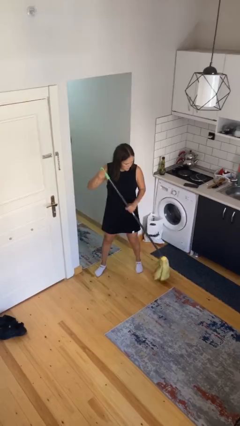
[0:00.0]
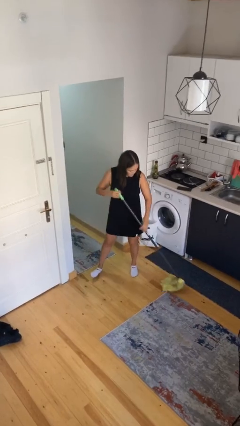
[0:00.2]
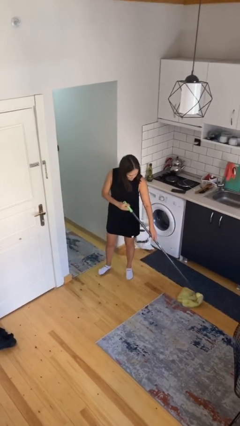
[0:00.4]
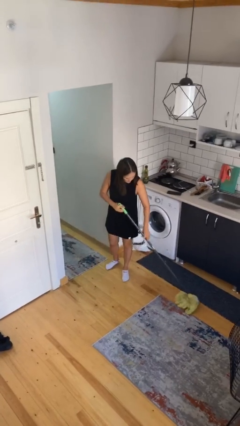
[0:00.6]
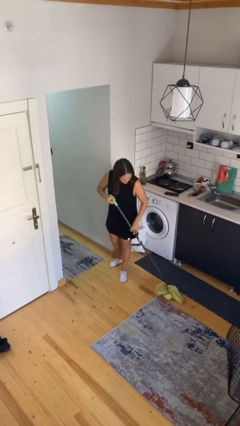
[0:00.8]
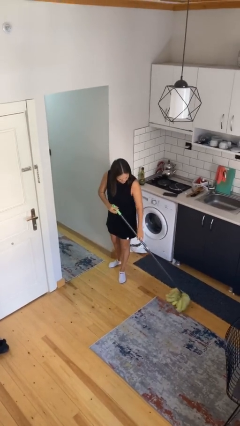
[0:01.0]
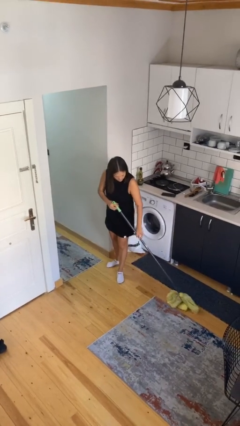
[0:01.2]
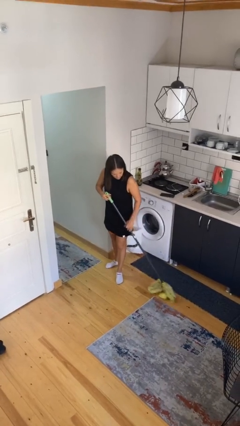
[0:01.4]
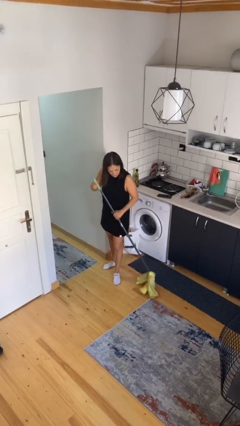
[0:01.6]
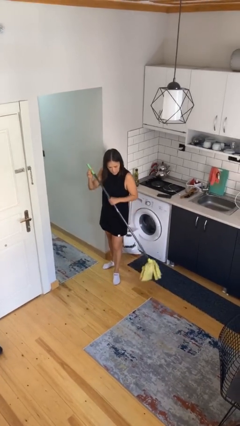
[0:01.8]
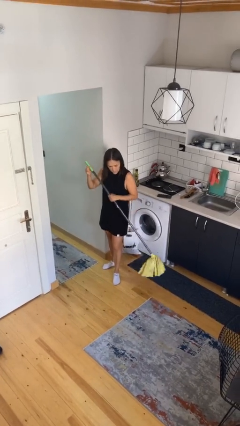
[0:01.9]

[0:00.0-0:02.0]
person sweeps floor

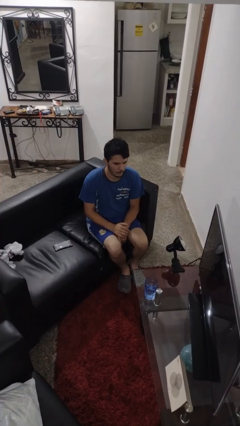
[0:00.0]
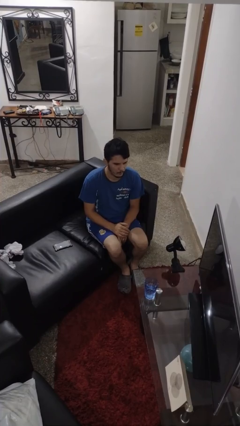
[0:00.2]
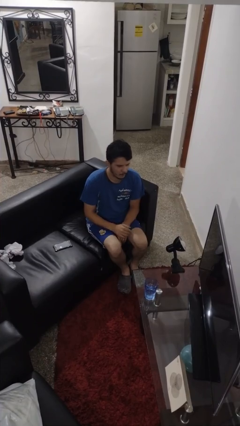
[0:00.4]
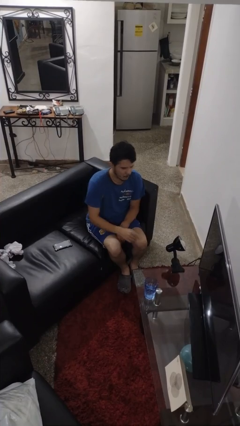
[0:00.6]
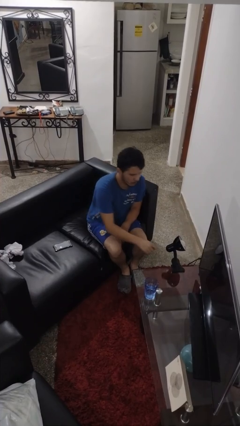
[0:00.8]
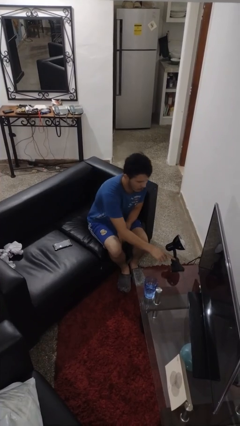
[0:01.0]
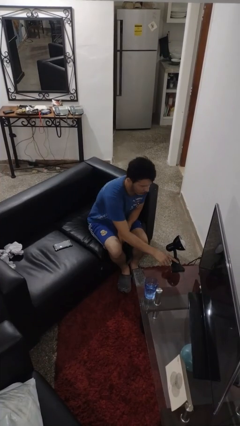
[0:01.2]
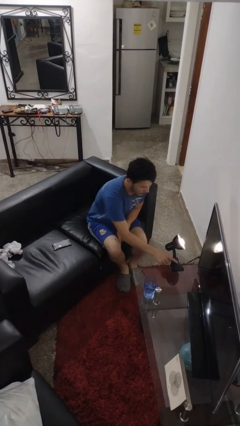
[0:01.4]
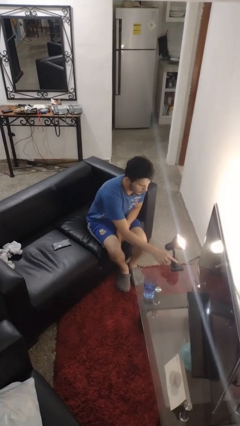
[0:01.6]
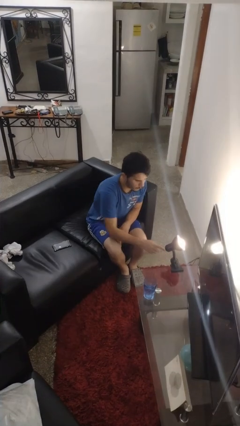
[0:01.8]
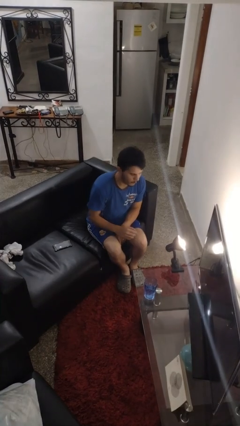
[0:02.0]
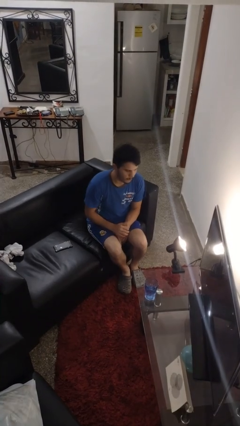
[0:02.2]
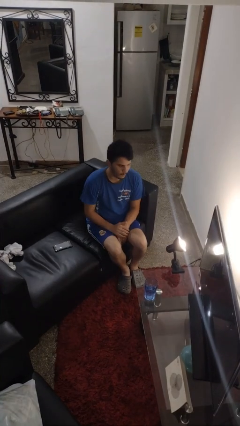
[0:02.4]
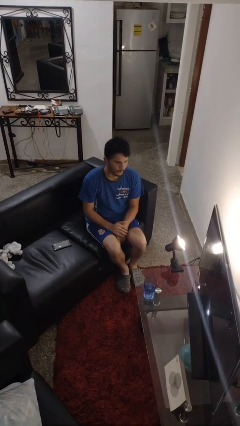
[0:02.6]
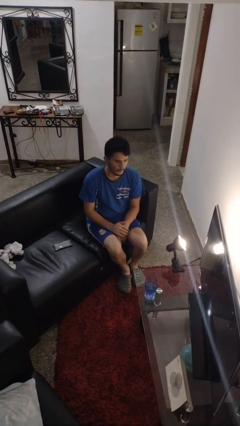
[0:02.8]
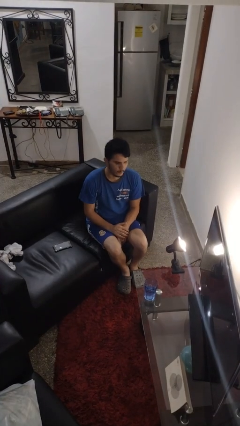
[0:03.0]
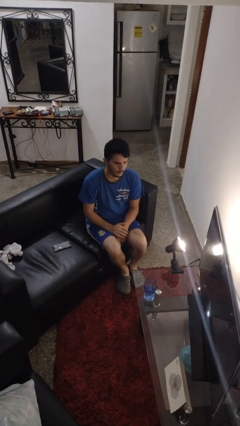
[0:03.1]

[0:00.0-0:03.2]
person turns on lamp

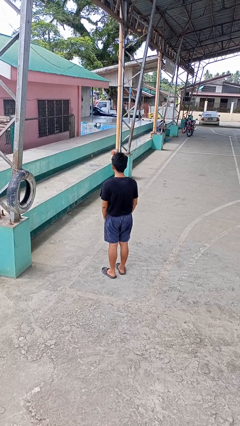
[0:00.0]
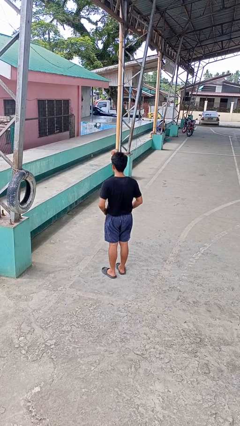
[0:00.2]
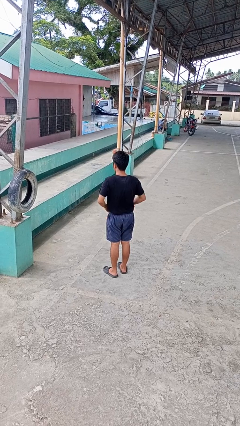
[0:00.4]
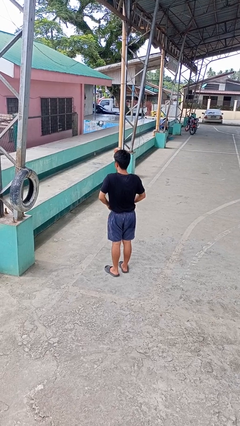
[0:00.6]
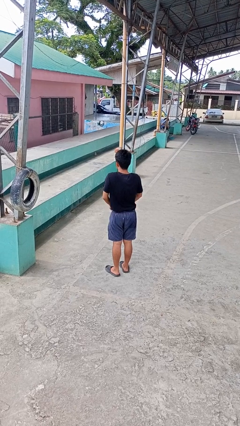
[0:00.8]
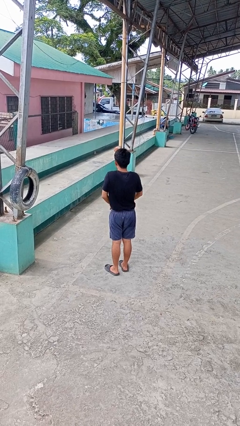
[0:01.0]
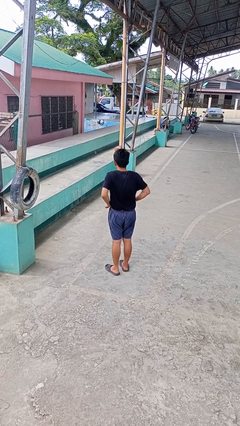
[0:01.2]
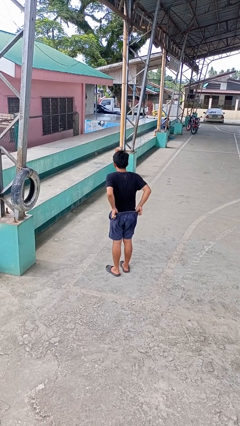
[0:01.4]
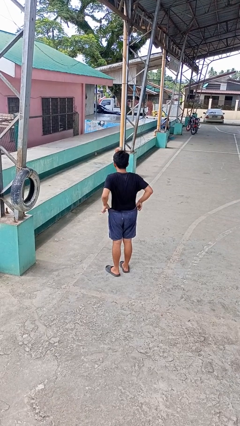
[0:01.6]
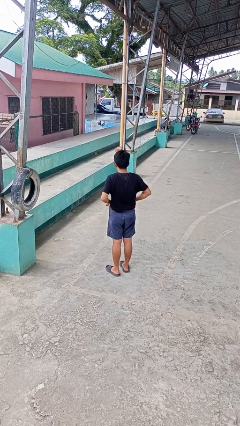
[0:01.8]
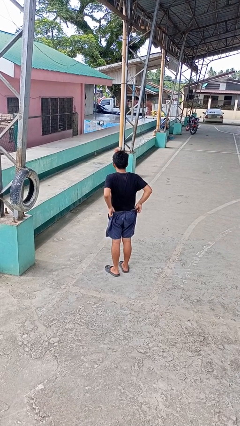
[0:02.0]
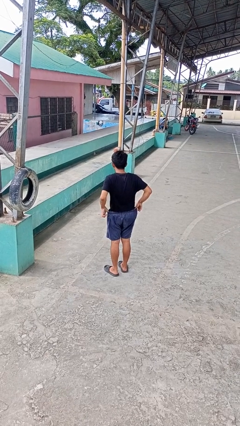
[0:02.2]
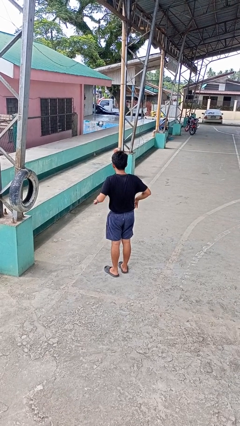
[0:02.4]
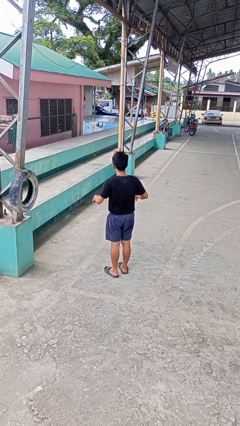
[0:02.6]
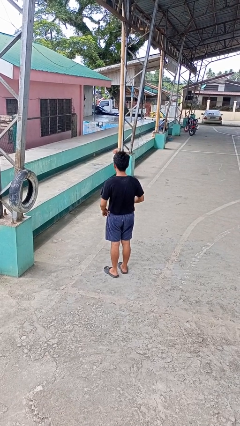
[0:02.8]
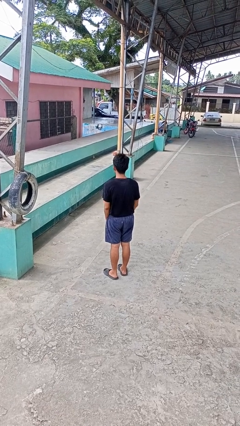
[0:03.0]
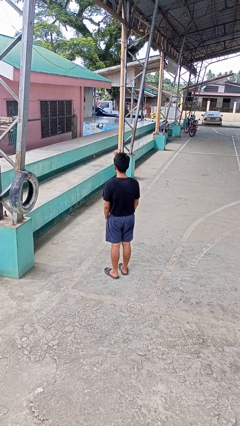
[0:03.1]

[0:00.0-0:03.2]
person hikes up pants

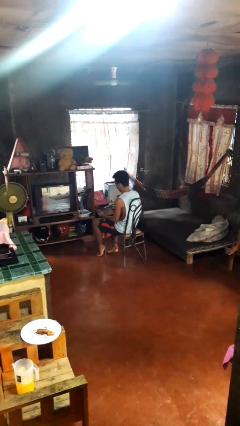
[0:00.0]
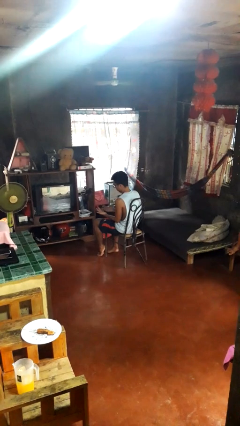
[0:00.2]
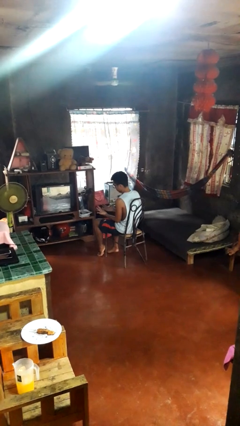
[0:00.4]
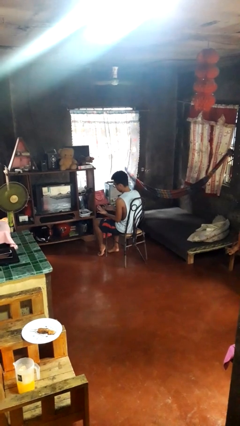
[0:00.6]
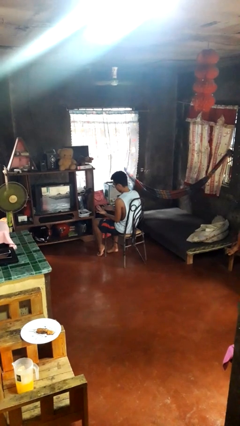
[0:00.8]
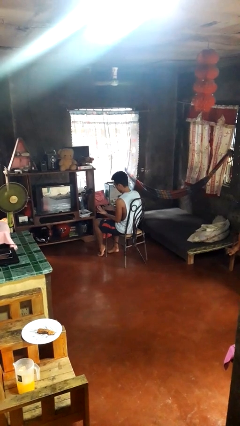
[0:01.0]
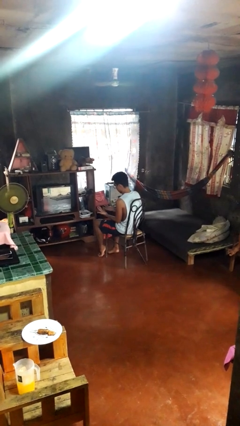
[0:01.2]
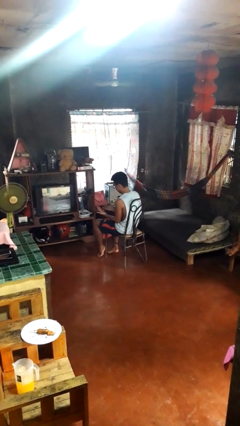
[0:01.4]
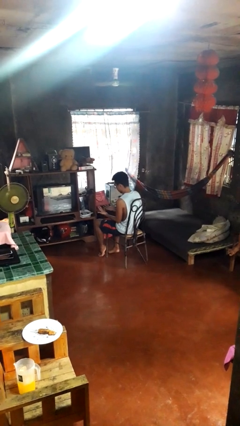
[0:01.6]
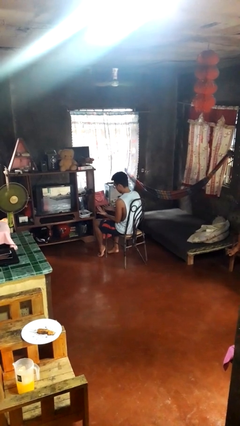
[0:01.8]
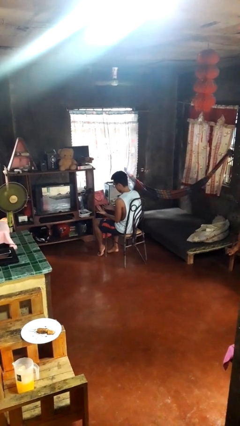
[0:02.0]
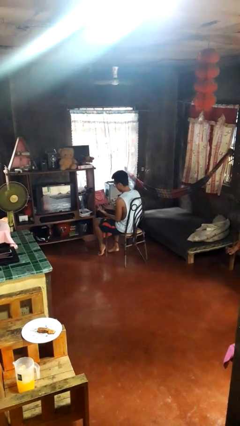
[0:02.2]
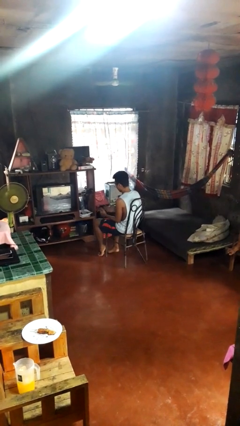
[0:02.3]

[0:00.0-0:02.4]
person looks at hands in lap

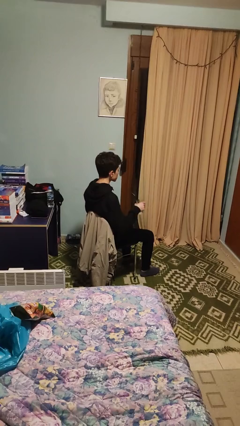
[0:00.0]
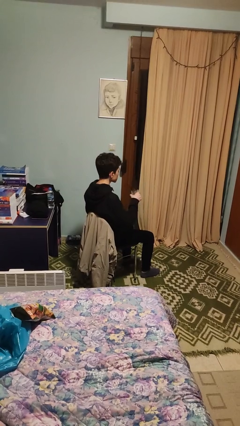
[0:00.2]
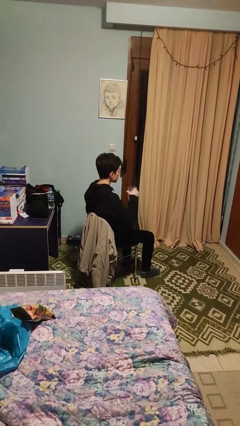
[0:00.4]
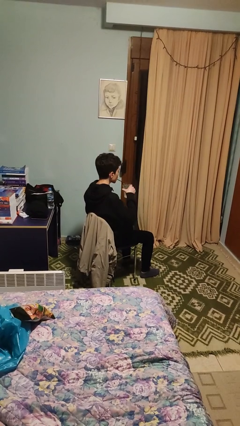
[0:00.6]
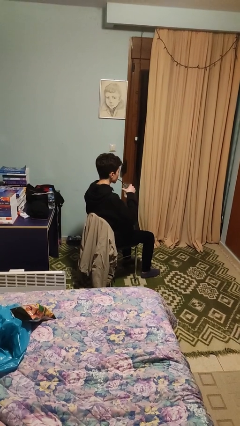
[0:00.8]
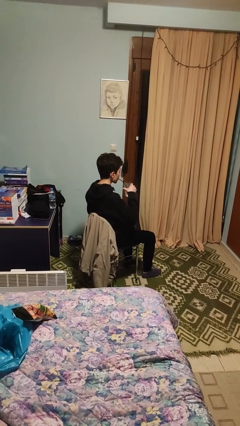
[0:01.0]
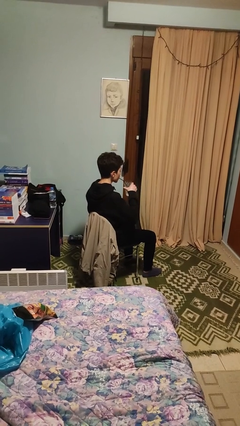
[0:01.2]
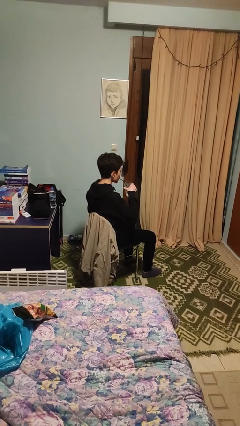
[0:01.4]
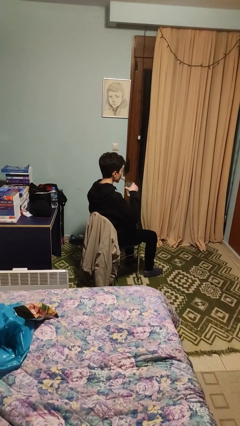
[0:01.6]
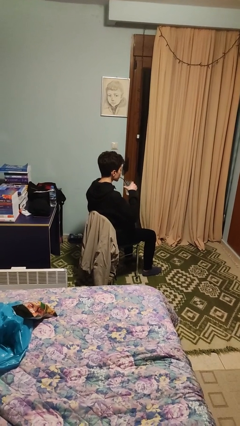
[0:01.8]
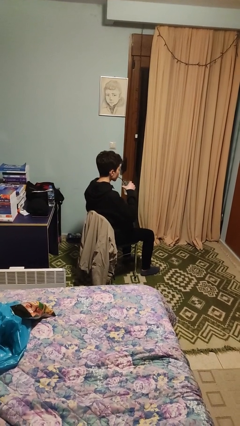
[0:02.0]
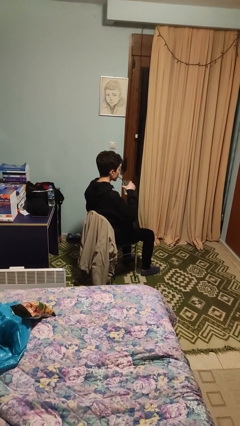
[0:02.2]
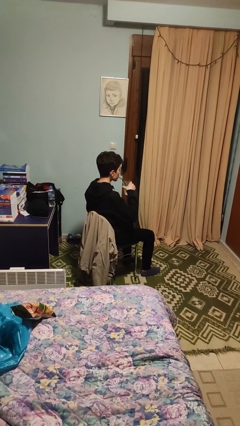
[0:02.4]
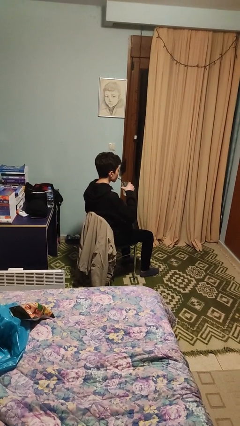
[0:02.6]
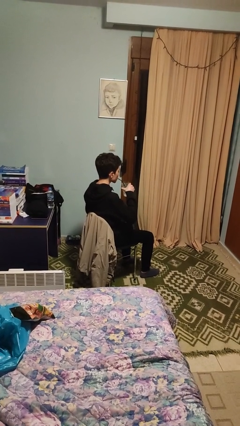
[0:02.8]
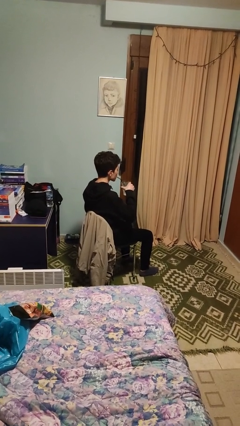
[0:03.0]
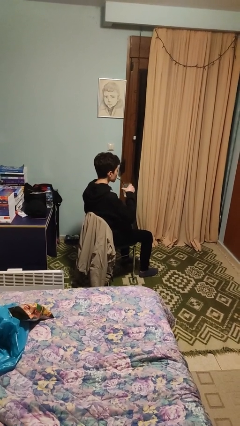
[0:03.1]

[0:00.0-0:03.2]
person drinks from straw

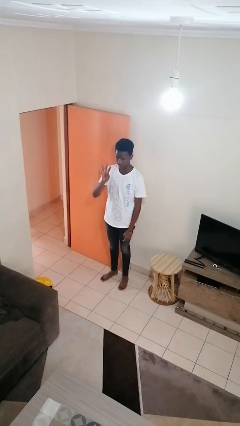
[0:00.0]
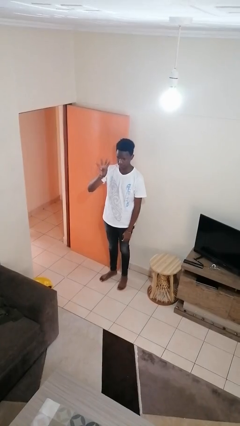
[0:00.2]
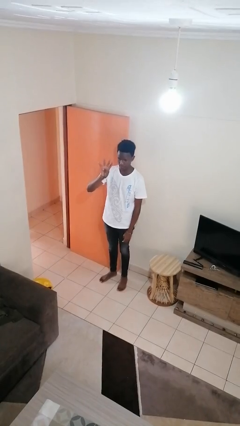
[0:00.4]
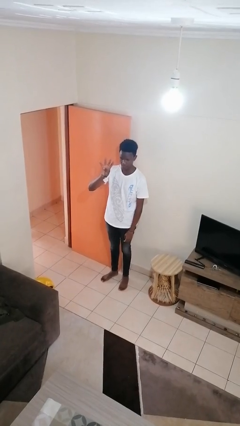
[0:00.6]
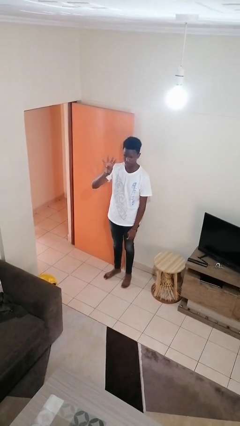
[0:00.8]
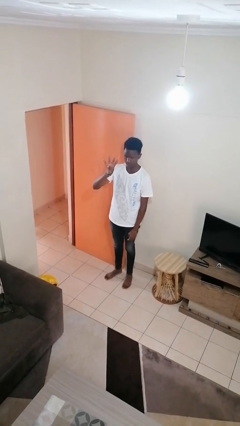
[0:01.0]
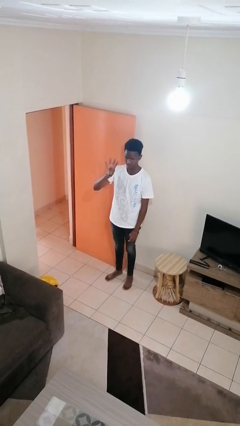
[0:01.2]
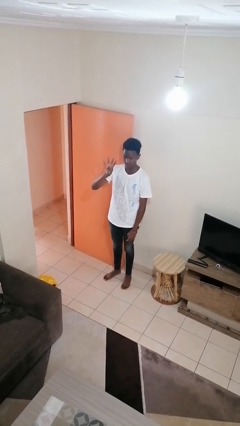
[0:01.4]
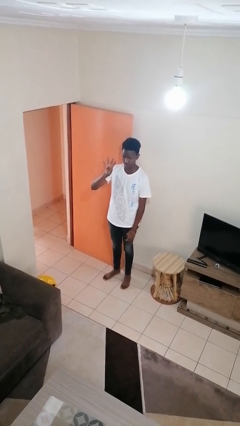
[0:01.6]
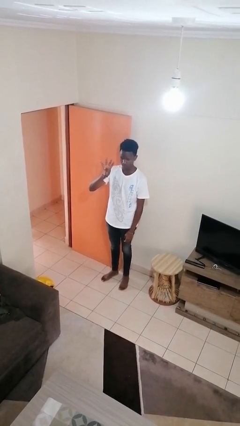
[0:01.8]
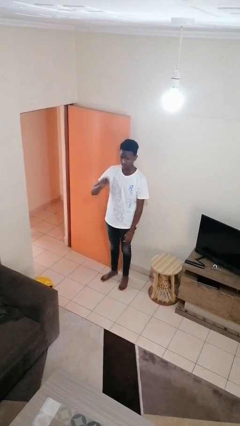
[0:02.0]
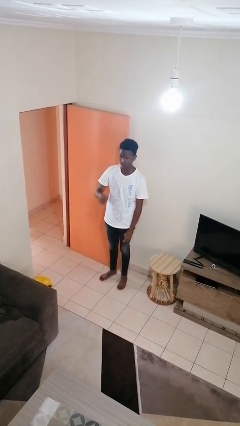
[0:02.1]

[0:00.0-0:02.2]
person gestures number four

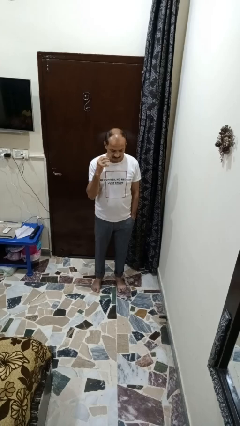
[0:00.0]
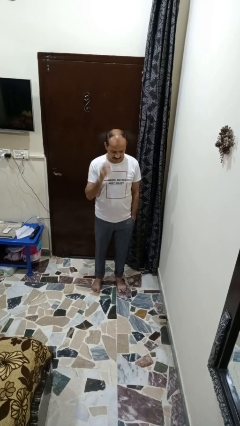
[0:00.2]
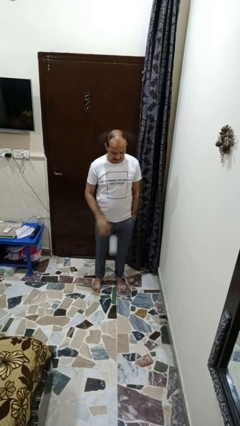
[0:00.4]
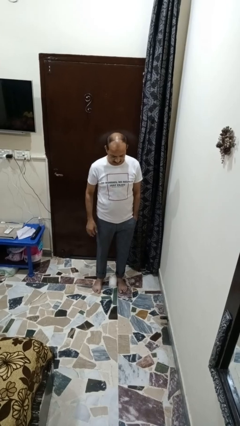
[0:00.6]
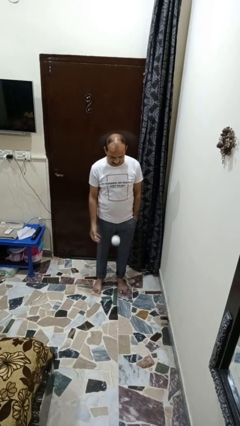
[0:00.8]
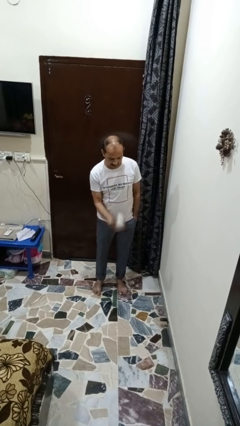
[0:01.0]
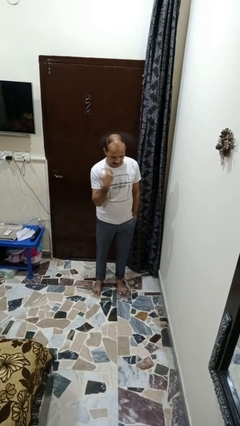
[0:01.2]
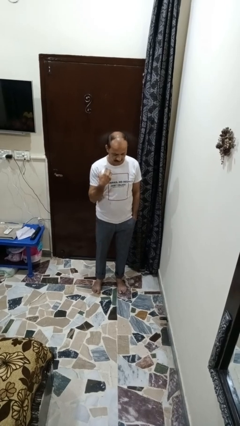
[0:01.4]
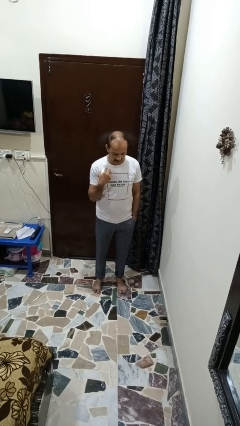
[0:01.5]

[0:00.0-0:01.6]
person bounces ball on floor
